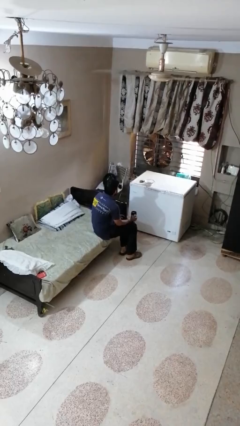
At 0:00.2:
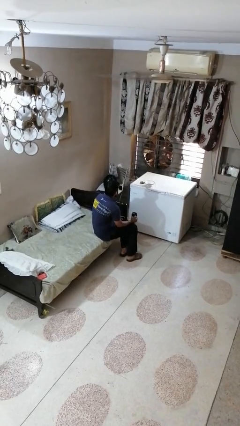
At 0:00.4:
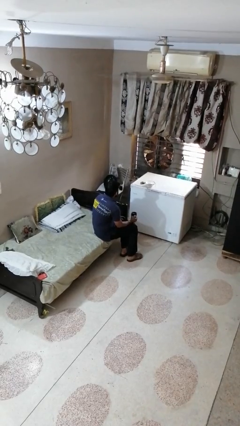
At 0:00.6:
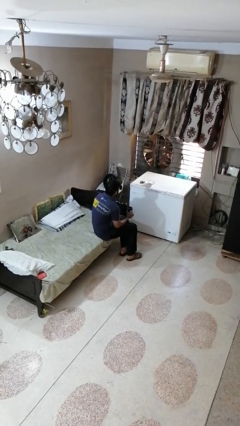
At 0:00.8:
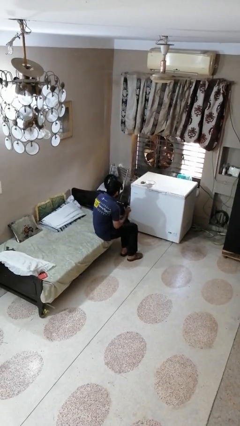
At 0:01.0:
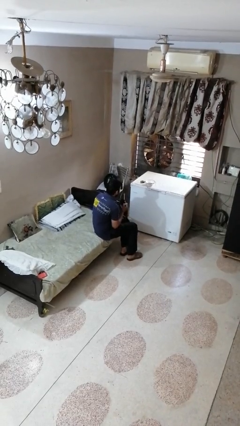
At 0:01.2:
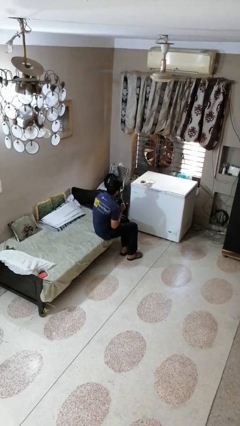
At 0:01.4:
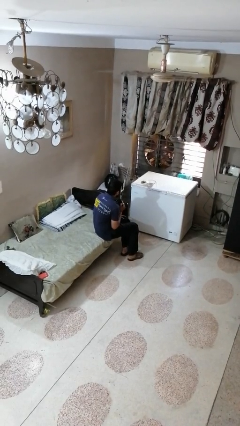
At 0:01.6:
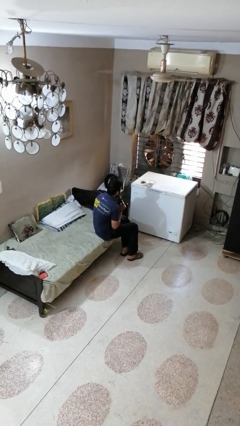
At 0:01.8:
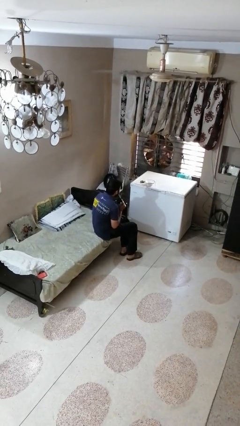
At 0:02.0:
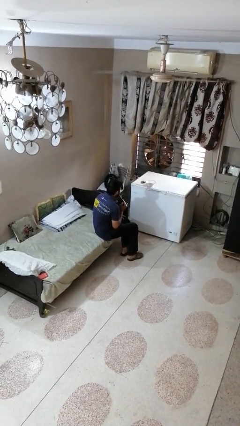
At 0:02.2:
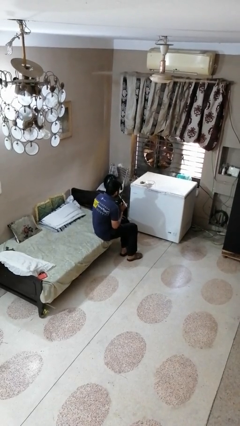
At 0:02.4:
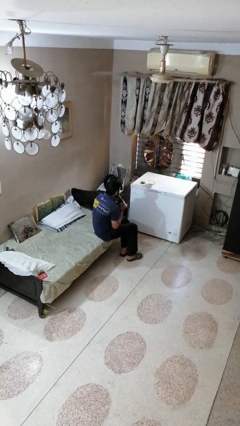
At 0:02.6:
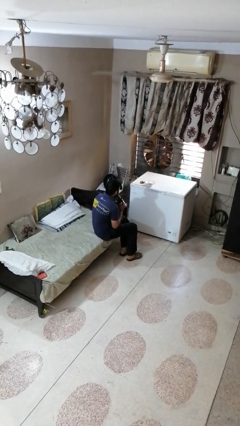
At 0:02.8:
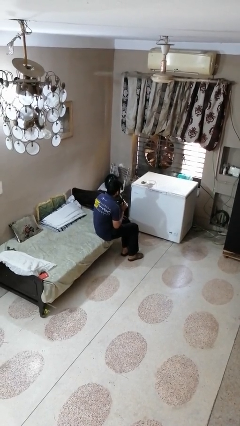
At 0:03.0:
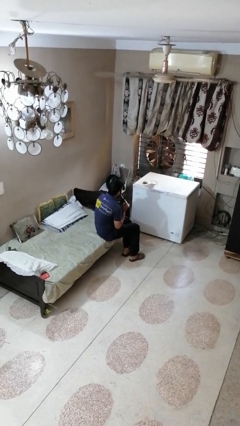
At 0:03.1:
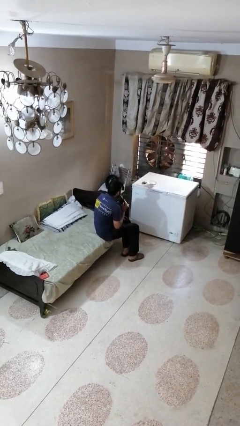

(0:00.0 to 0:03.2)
person drinks from straw

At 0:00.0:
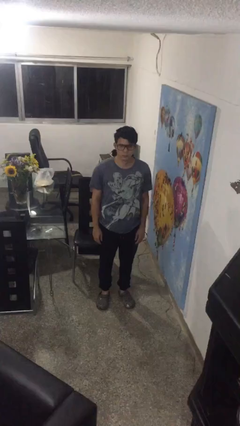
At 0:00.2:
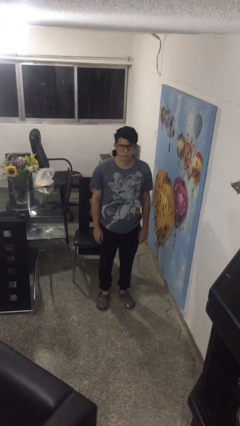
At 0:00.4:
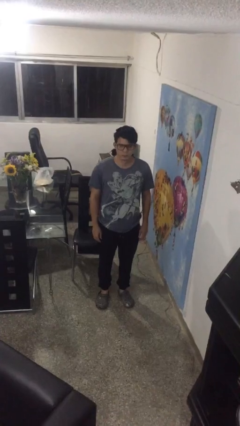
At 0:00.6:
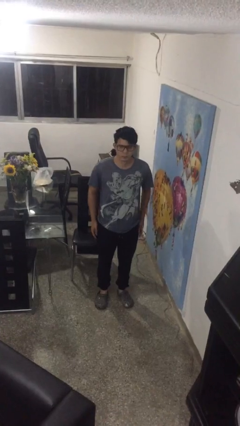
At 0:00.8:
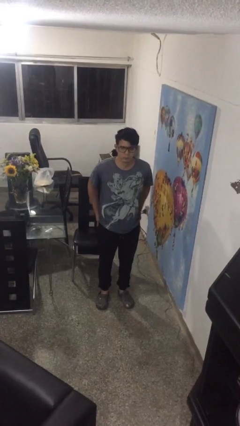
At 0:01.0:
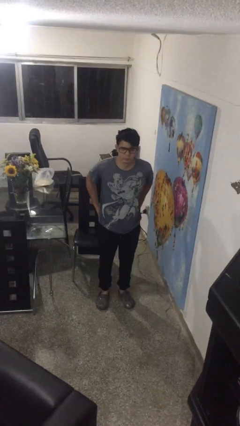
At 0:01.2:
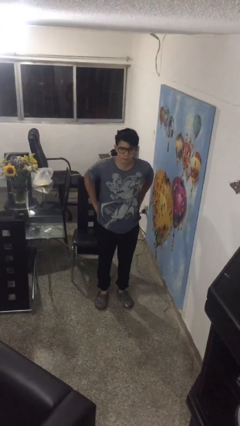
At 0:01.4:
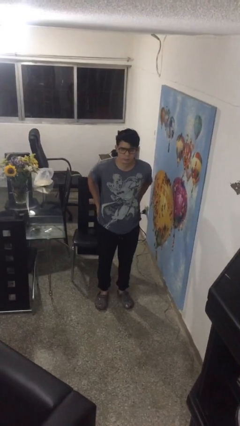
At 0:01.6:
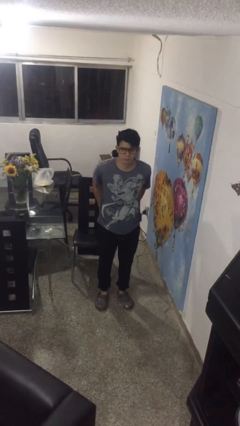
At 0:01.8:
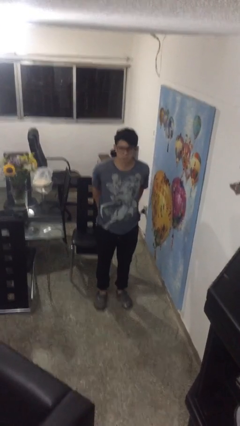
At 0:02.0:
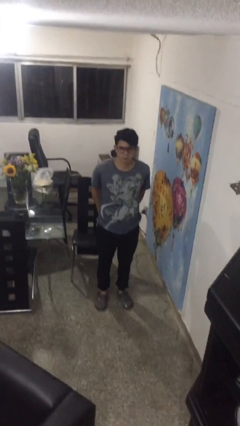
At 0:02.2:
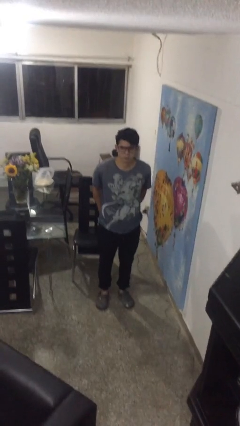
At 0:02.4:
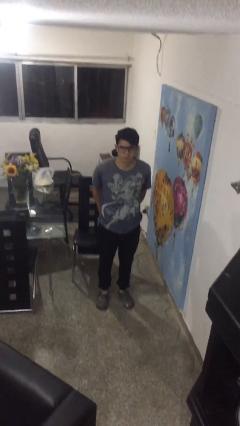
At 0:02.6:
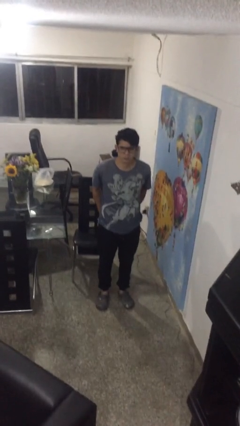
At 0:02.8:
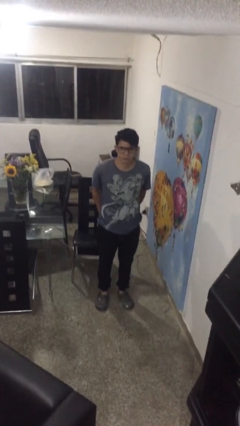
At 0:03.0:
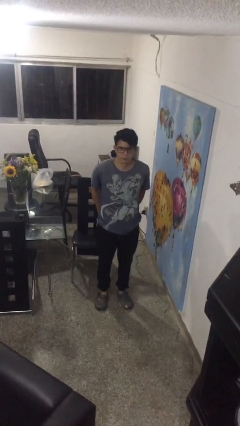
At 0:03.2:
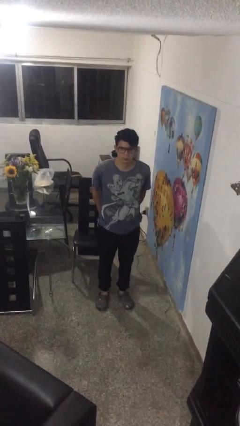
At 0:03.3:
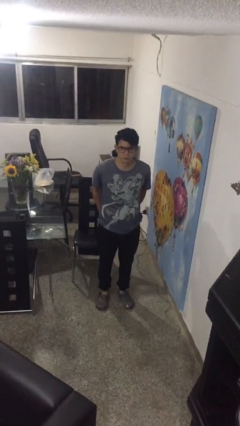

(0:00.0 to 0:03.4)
person puts hands in back pockets

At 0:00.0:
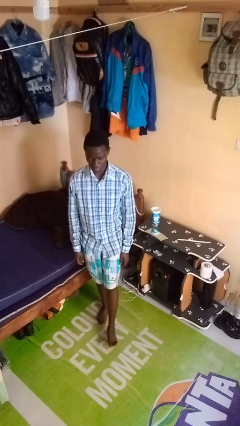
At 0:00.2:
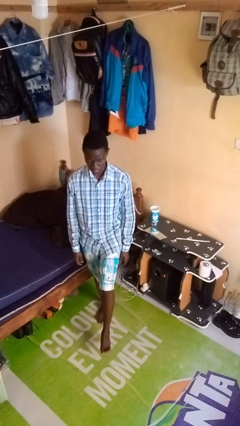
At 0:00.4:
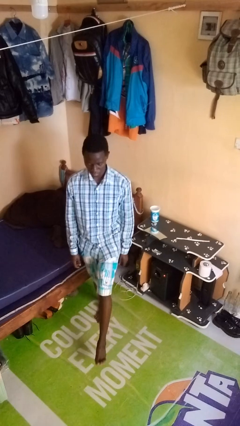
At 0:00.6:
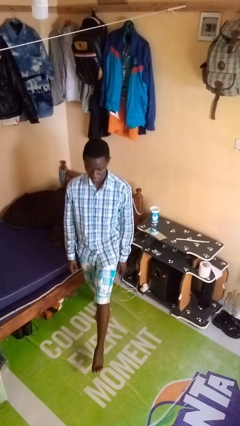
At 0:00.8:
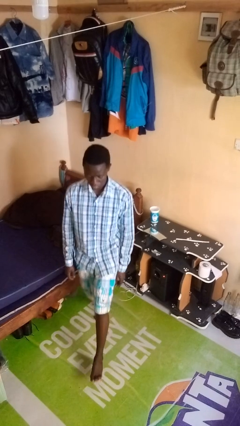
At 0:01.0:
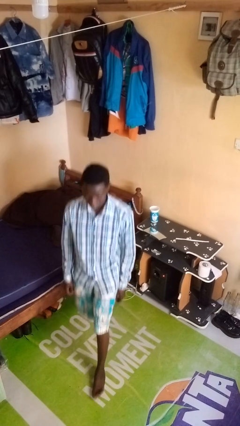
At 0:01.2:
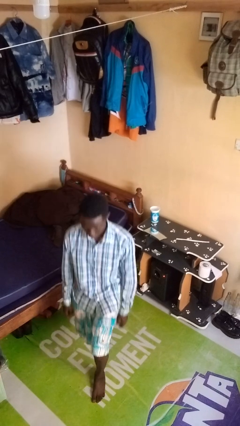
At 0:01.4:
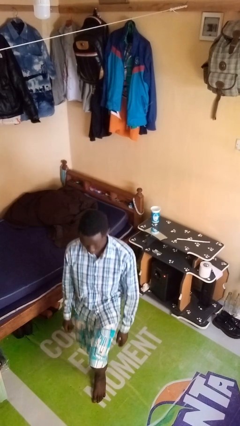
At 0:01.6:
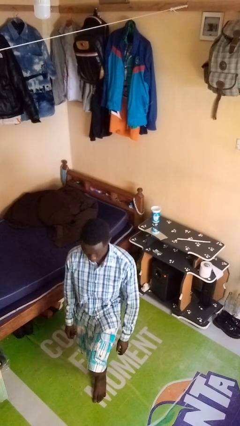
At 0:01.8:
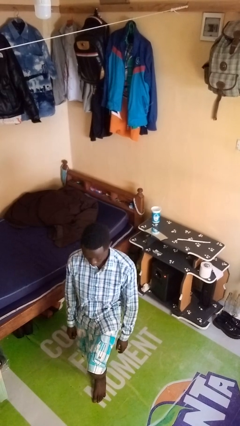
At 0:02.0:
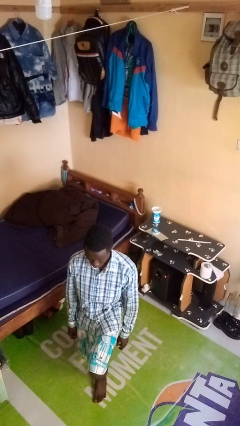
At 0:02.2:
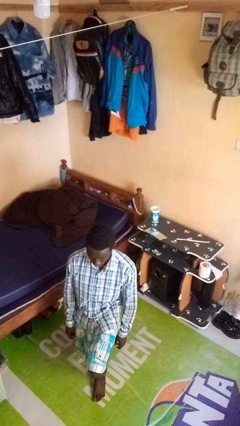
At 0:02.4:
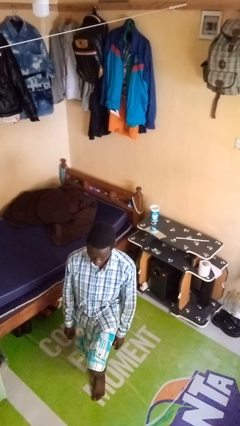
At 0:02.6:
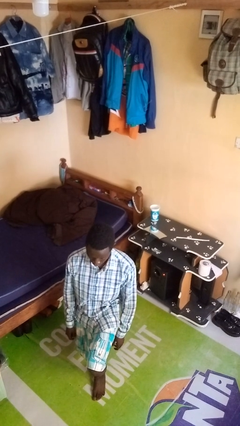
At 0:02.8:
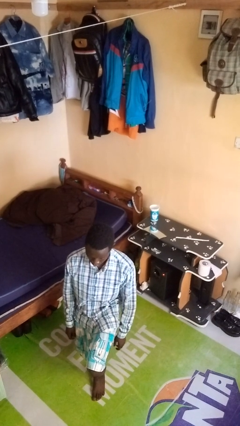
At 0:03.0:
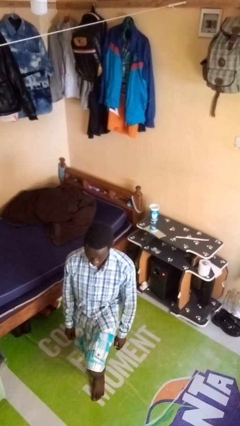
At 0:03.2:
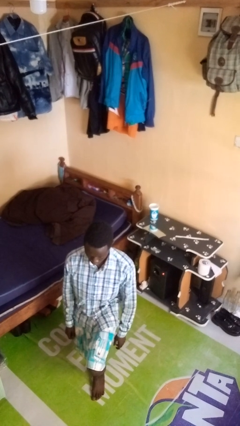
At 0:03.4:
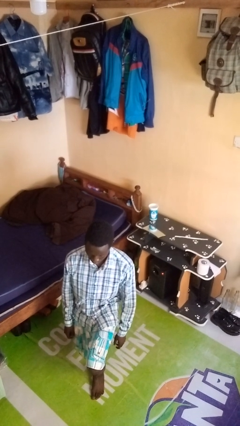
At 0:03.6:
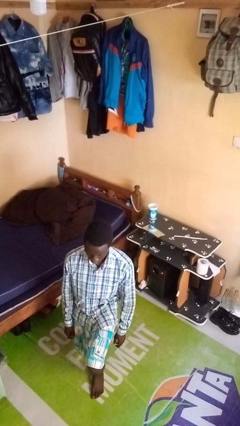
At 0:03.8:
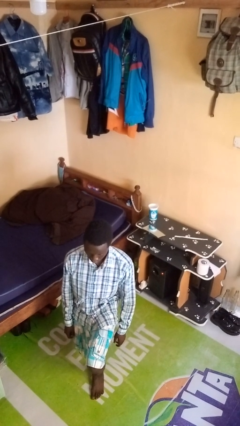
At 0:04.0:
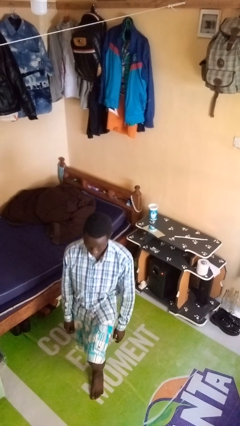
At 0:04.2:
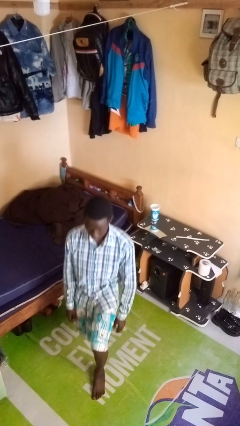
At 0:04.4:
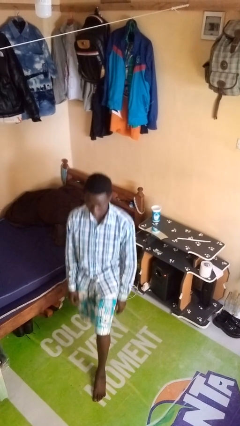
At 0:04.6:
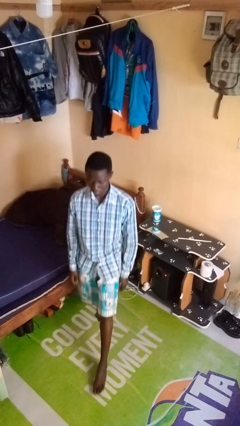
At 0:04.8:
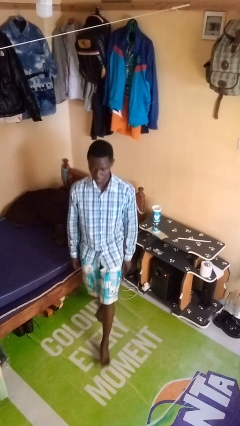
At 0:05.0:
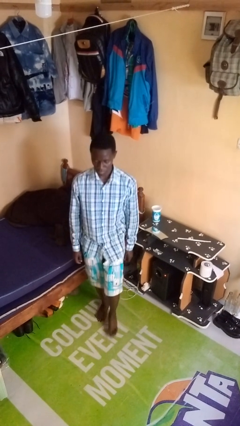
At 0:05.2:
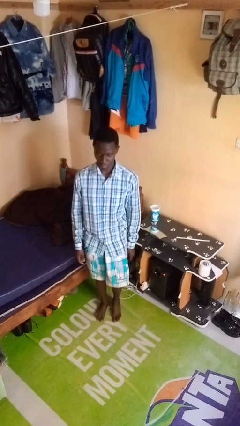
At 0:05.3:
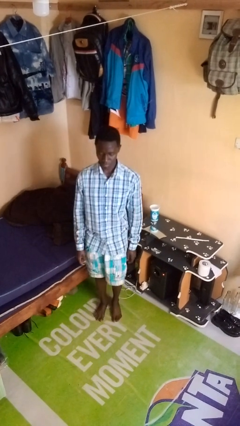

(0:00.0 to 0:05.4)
person exercises with lunges

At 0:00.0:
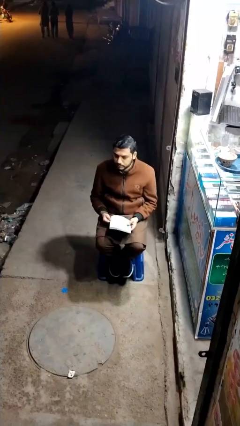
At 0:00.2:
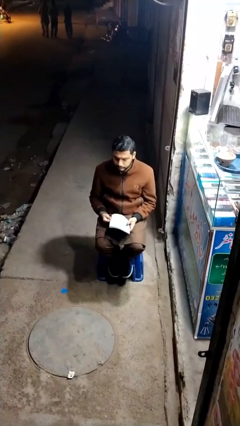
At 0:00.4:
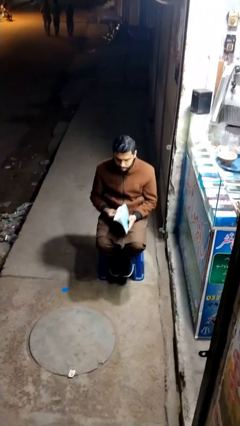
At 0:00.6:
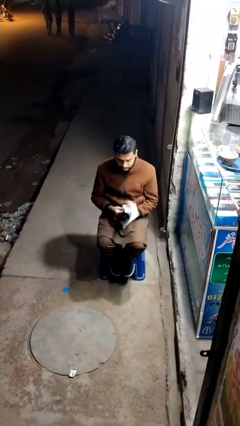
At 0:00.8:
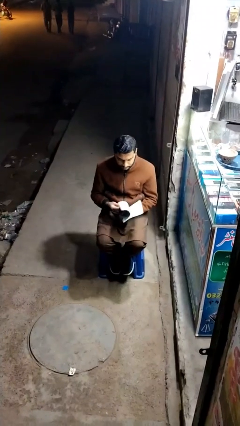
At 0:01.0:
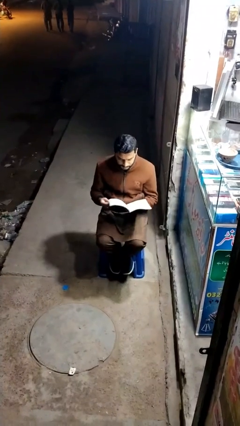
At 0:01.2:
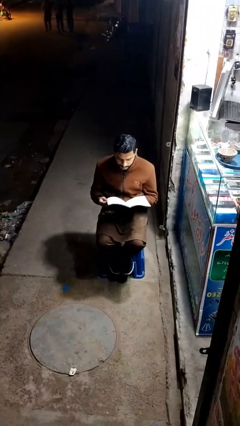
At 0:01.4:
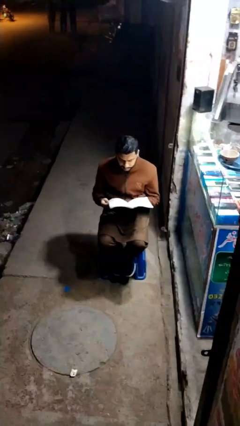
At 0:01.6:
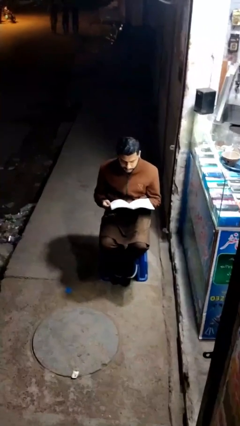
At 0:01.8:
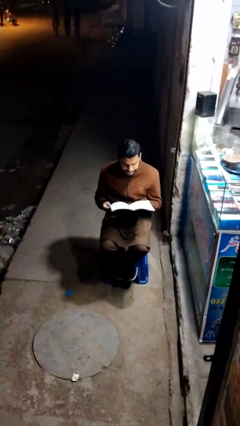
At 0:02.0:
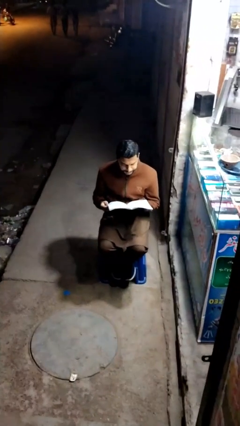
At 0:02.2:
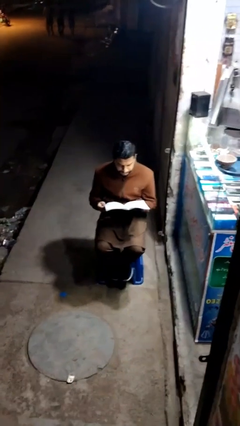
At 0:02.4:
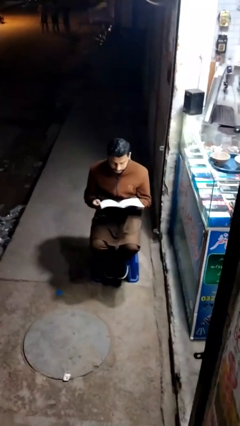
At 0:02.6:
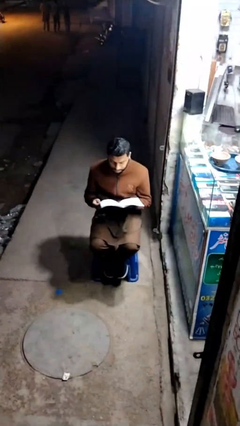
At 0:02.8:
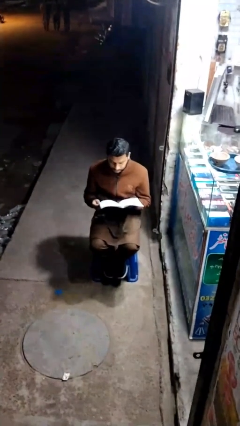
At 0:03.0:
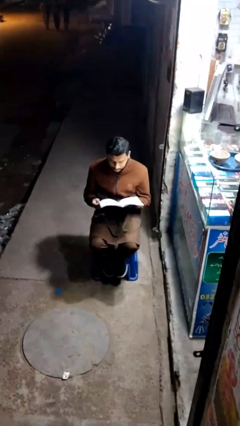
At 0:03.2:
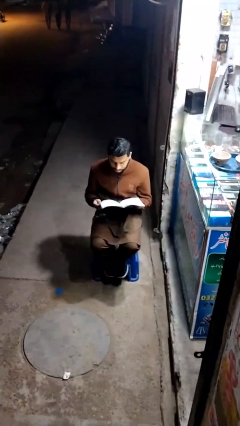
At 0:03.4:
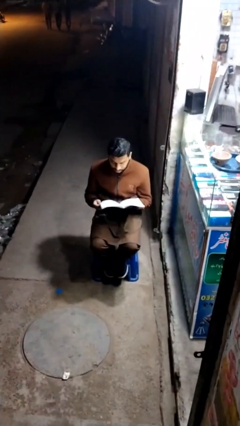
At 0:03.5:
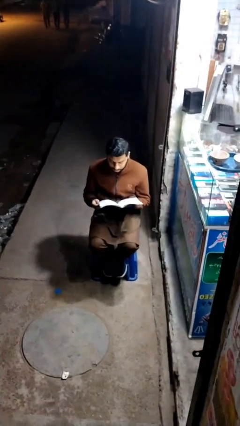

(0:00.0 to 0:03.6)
person interacts with laptop

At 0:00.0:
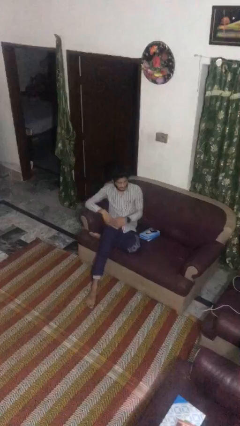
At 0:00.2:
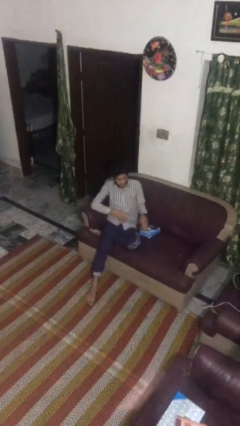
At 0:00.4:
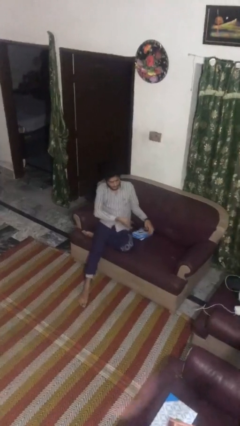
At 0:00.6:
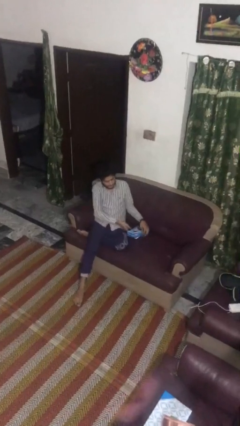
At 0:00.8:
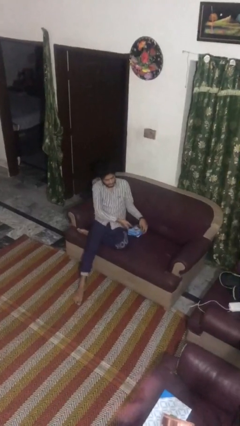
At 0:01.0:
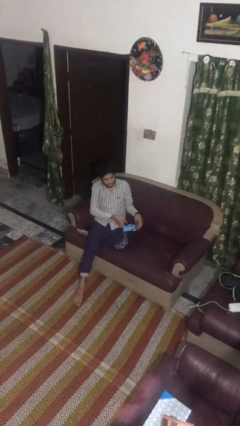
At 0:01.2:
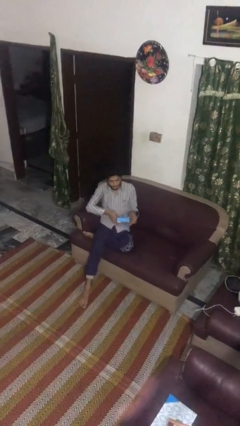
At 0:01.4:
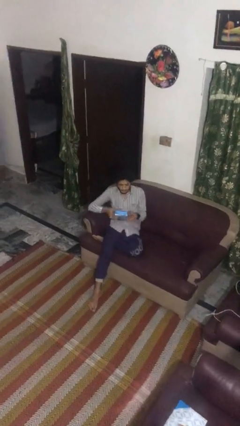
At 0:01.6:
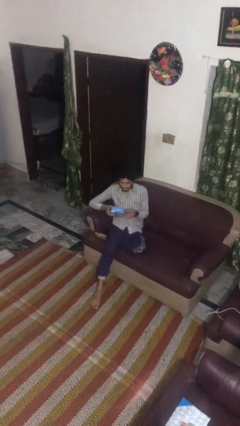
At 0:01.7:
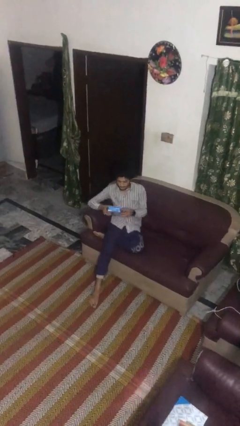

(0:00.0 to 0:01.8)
person picks up object from couch

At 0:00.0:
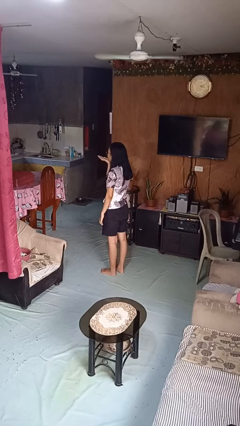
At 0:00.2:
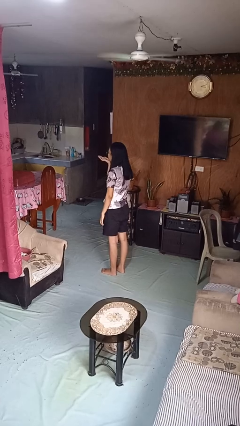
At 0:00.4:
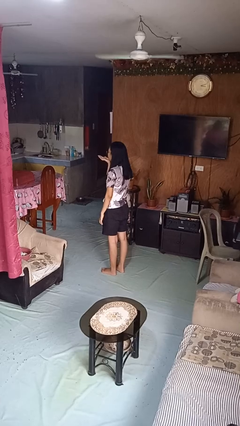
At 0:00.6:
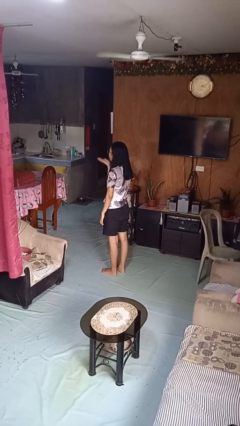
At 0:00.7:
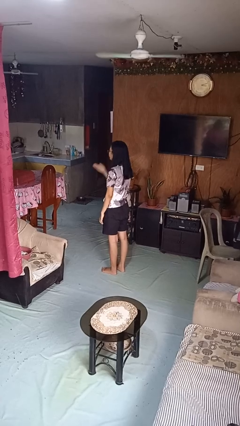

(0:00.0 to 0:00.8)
person gestures blow kiss
